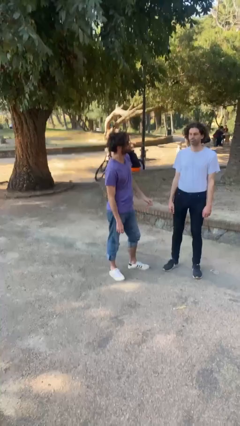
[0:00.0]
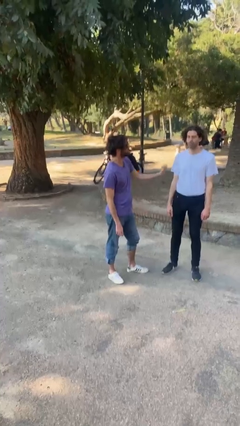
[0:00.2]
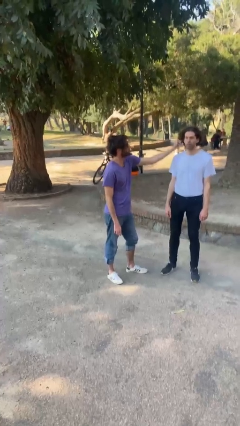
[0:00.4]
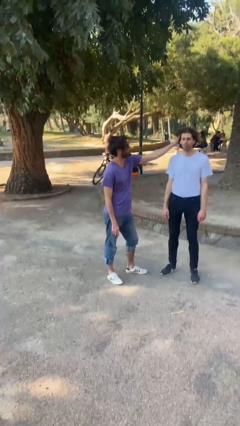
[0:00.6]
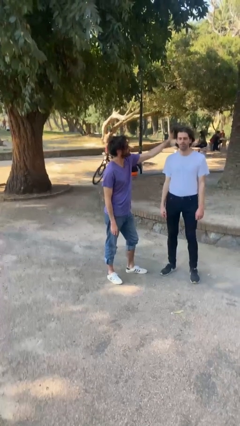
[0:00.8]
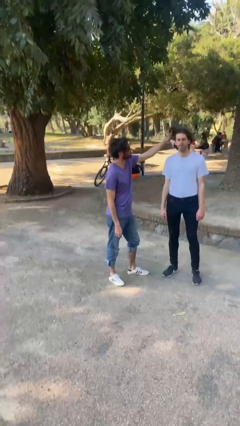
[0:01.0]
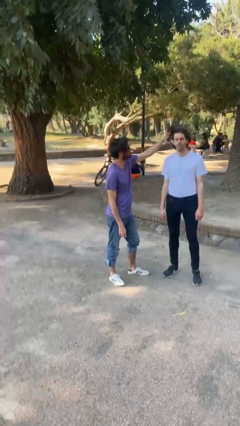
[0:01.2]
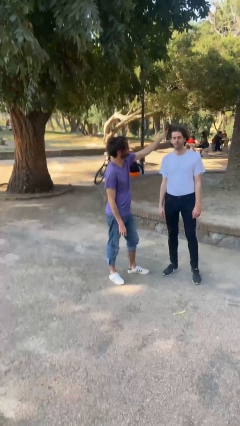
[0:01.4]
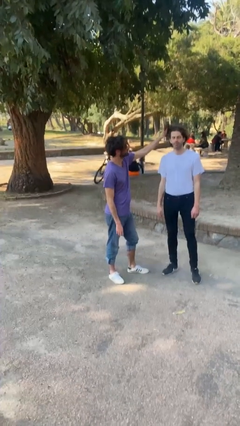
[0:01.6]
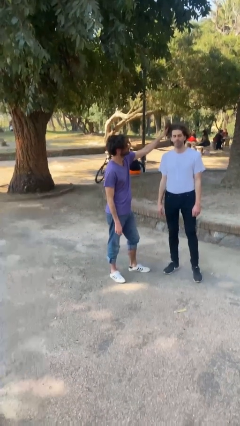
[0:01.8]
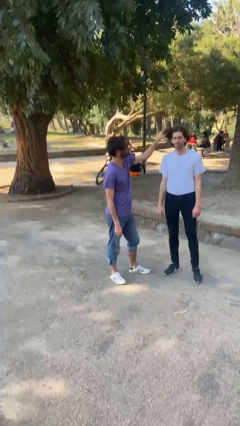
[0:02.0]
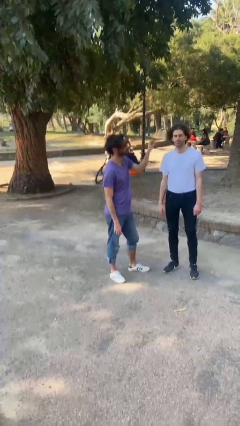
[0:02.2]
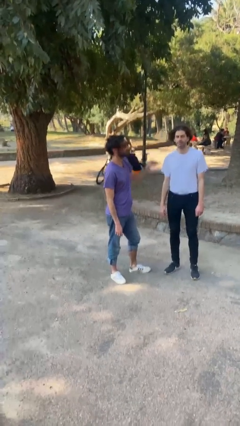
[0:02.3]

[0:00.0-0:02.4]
person grabs person by hair

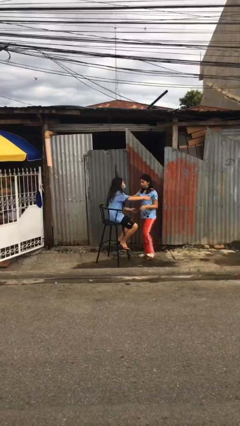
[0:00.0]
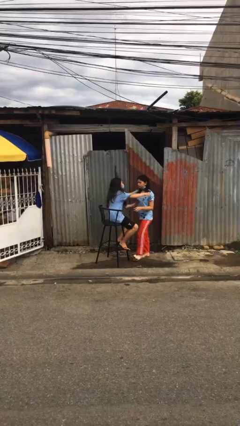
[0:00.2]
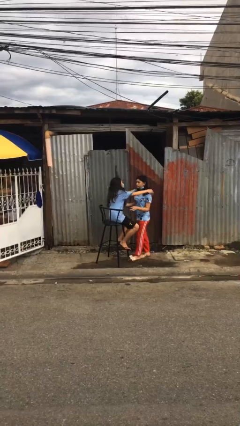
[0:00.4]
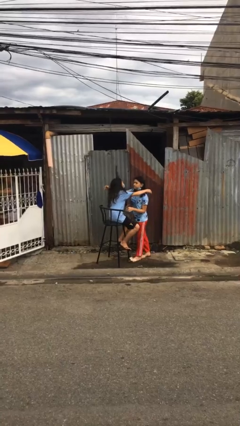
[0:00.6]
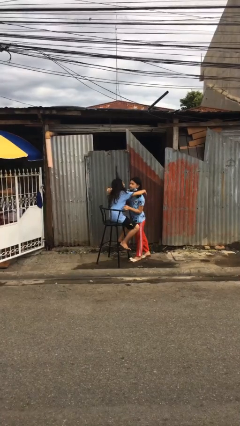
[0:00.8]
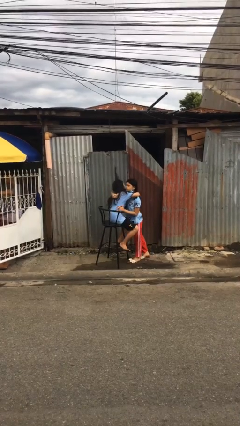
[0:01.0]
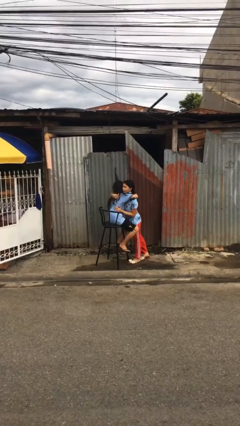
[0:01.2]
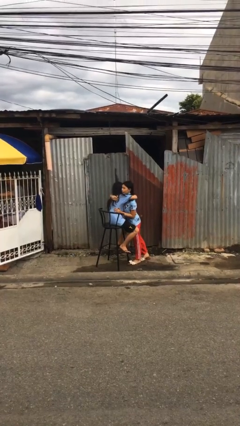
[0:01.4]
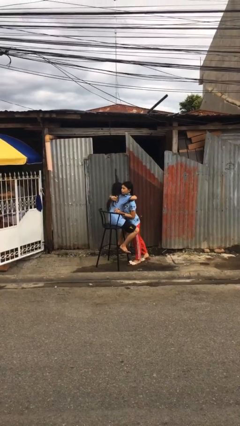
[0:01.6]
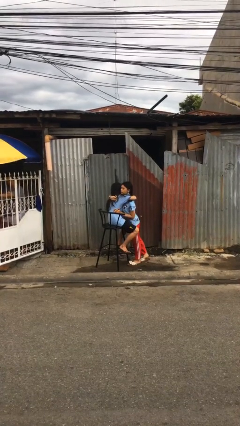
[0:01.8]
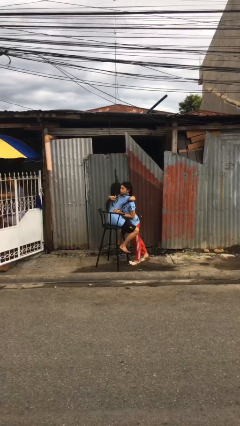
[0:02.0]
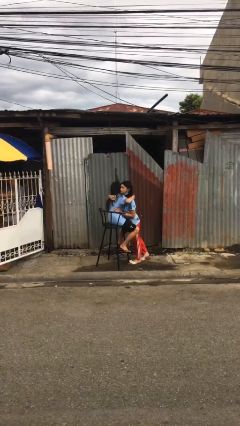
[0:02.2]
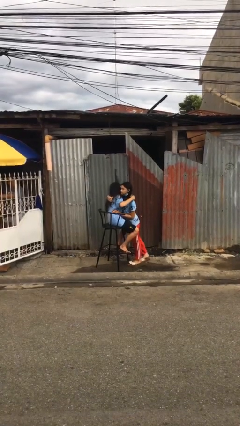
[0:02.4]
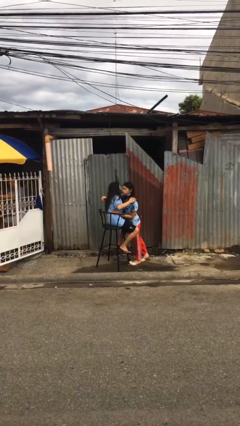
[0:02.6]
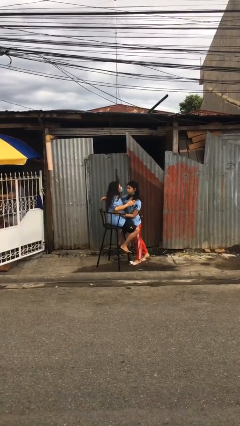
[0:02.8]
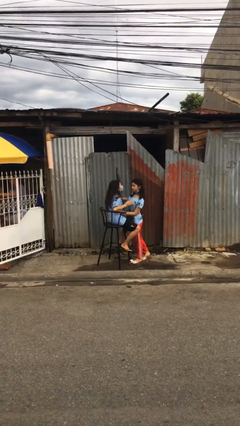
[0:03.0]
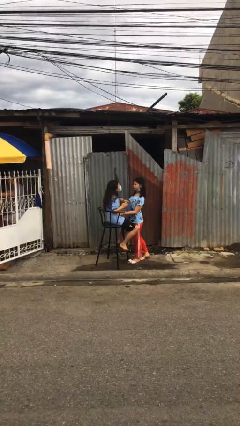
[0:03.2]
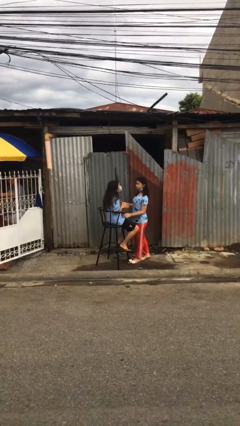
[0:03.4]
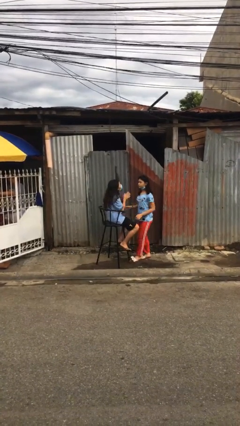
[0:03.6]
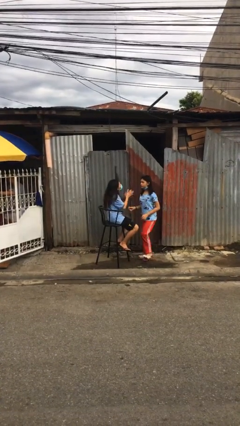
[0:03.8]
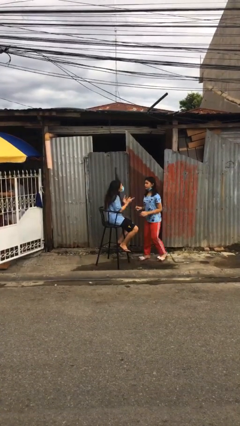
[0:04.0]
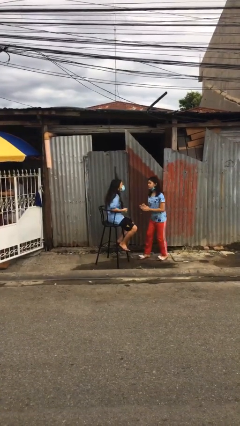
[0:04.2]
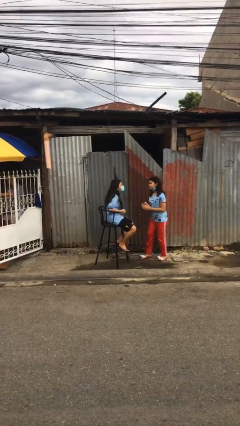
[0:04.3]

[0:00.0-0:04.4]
person embraces person

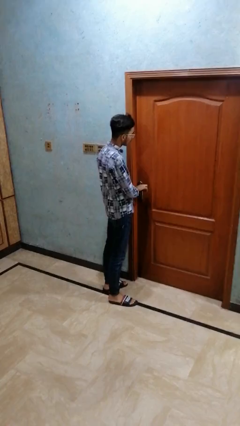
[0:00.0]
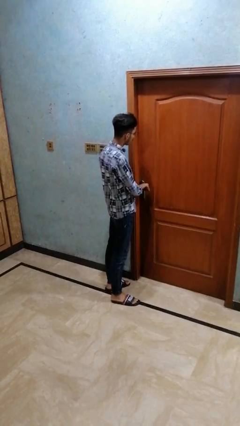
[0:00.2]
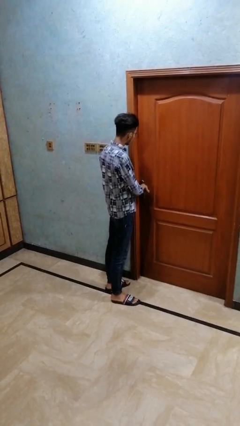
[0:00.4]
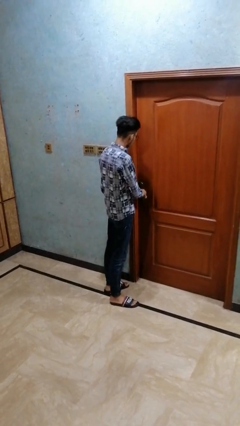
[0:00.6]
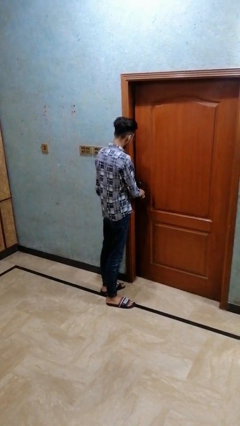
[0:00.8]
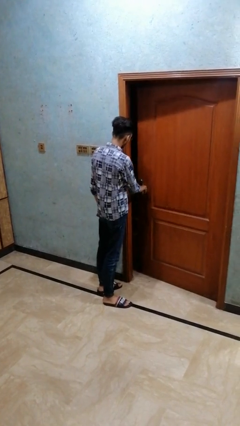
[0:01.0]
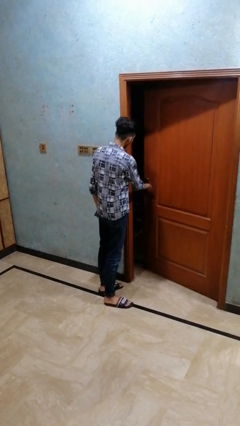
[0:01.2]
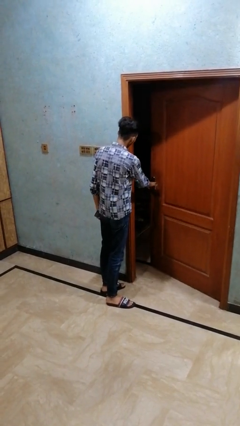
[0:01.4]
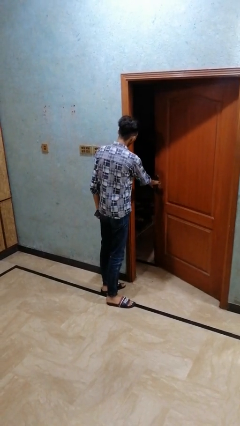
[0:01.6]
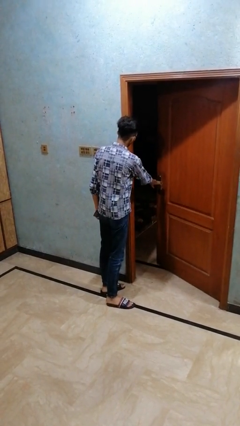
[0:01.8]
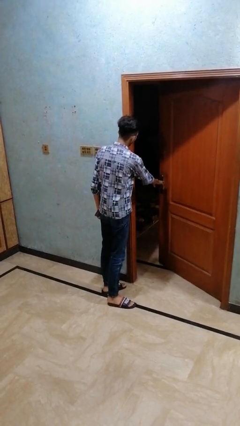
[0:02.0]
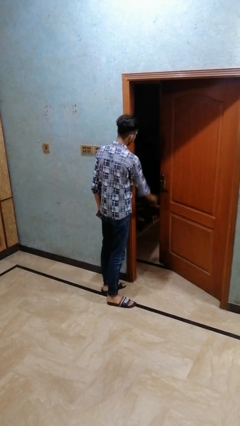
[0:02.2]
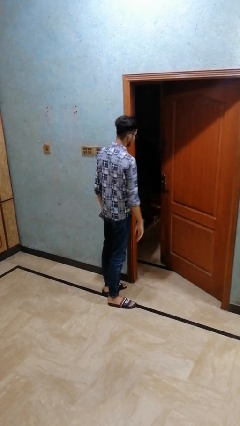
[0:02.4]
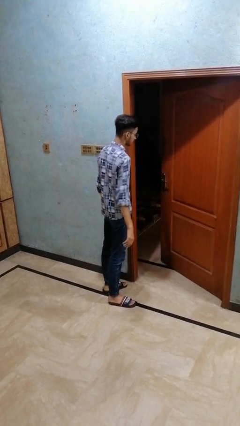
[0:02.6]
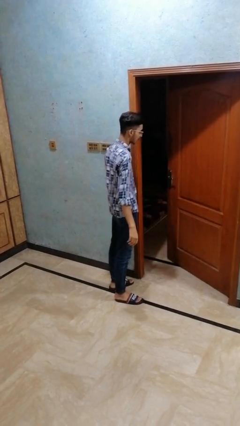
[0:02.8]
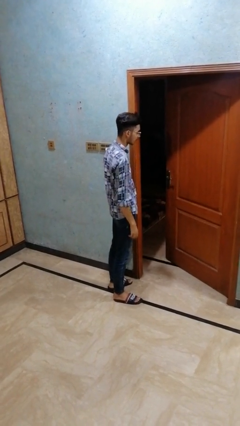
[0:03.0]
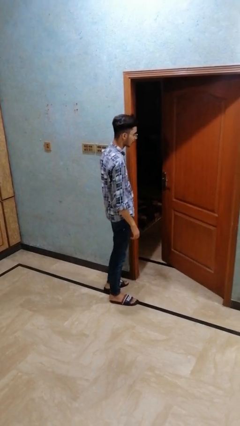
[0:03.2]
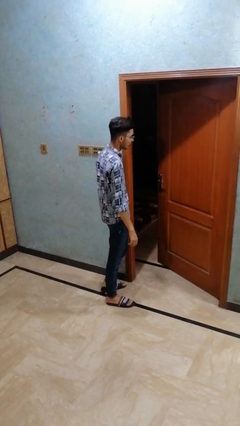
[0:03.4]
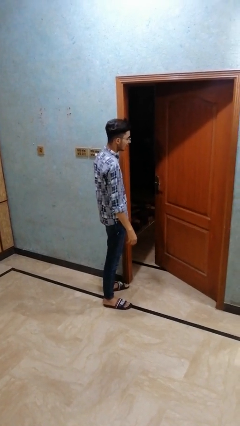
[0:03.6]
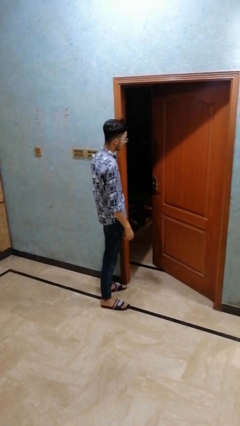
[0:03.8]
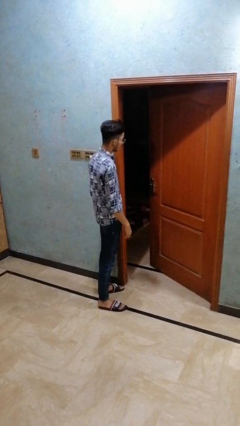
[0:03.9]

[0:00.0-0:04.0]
person opens closet door

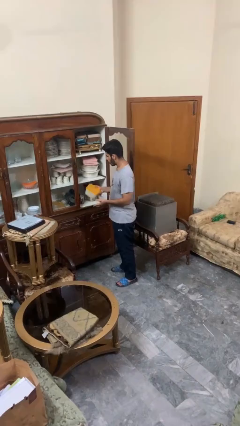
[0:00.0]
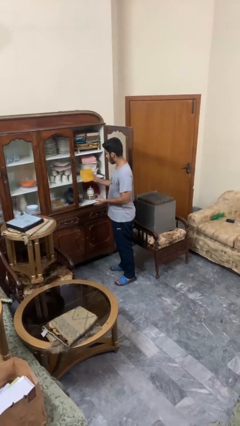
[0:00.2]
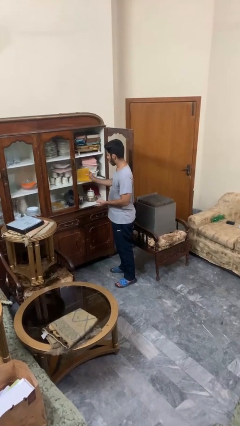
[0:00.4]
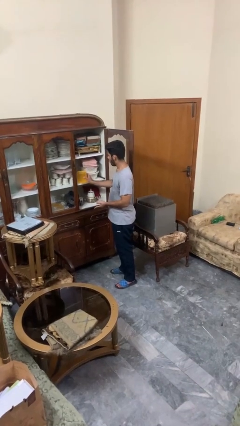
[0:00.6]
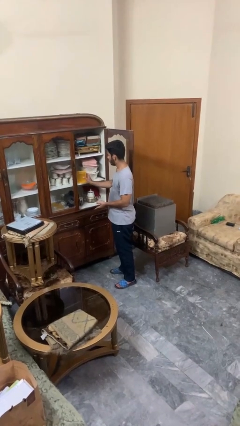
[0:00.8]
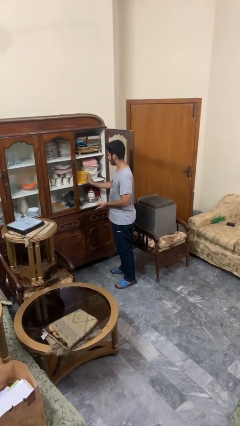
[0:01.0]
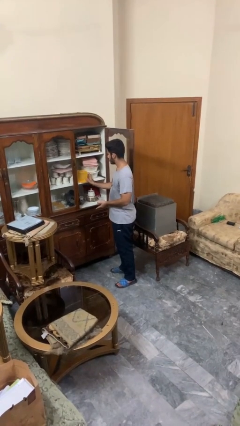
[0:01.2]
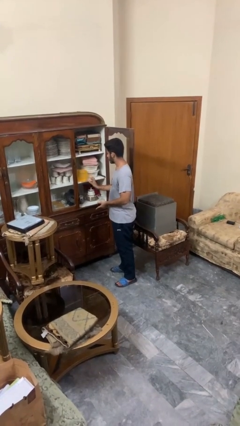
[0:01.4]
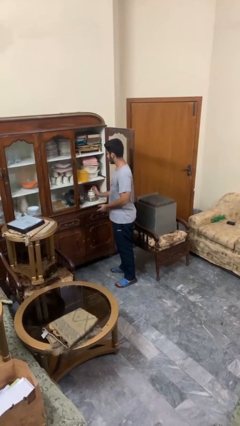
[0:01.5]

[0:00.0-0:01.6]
person puts down object into cabinet

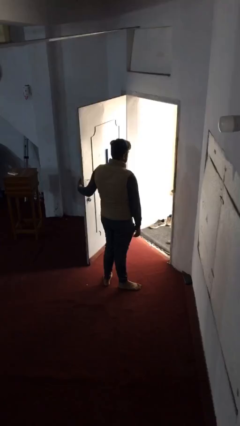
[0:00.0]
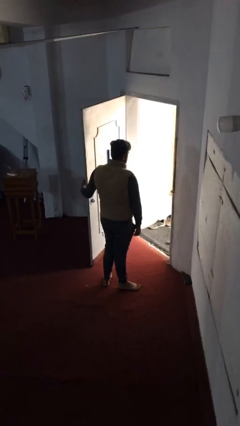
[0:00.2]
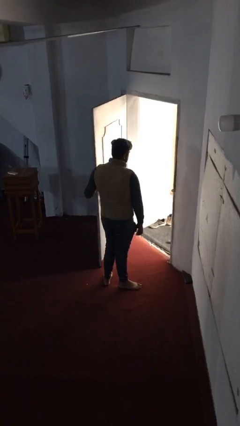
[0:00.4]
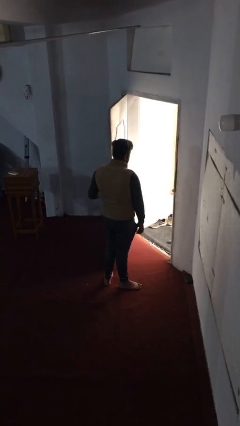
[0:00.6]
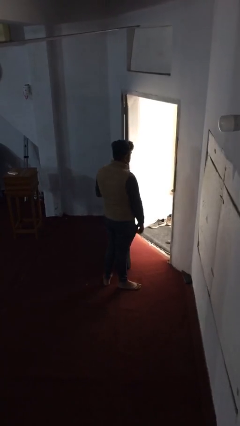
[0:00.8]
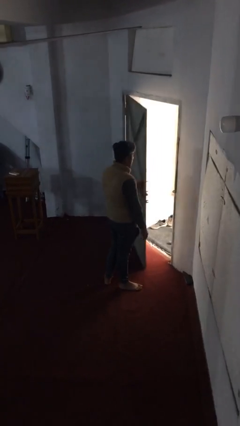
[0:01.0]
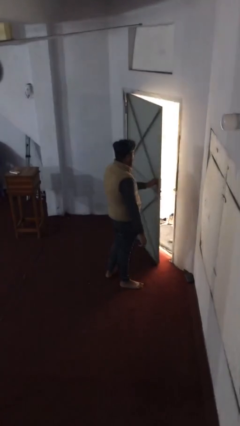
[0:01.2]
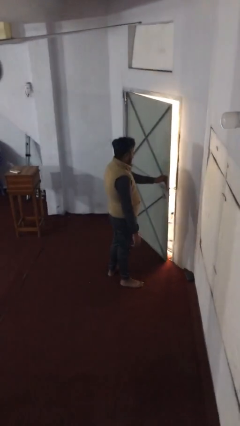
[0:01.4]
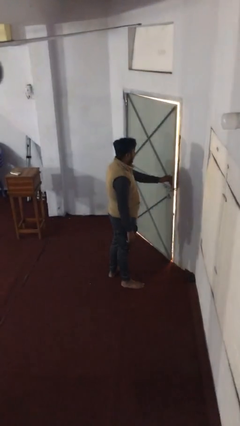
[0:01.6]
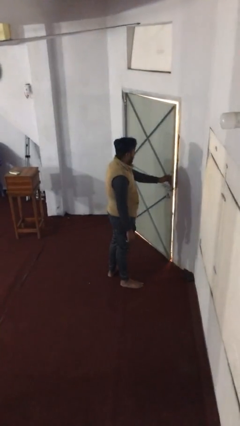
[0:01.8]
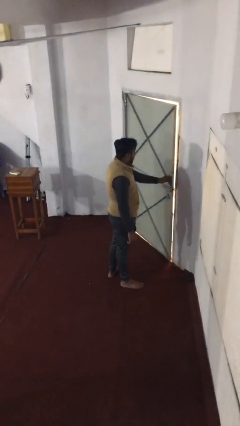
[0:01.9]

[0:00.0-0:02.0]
person closes facility door

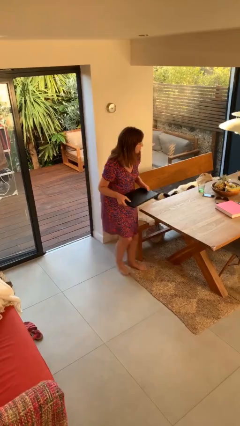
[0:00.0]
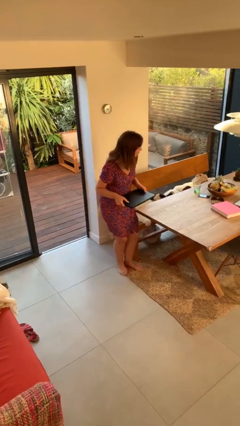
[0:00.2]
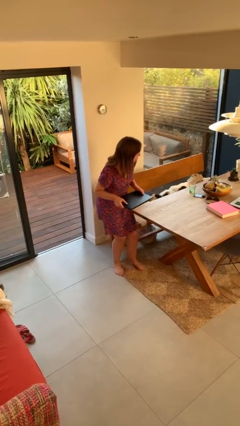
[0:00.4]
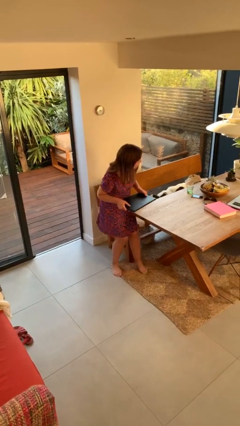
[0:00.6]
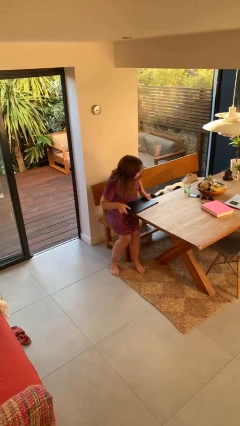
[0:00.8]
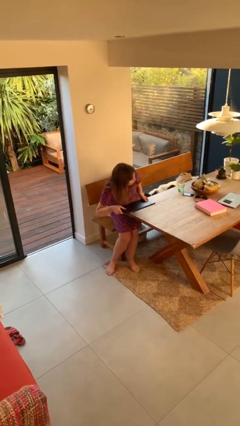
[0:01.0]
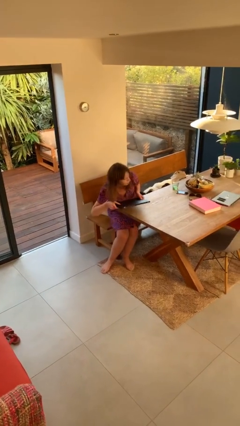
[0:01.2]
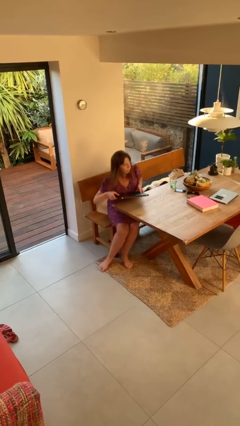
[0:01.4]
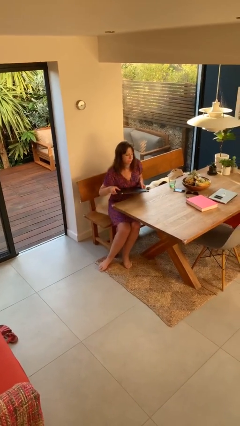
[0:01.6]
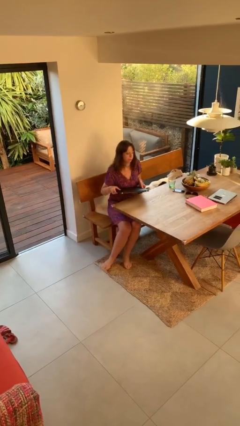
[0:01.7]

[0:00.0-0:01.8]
person sits down

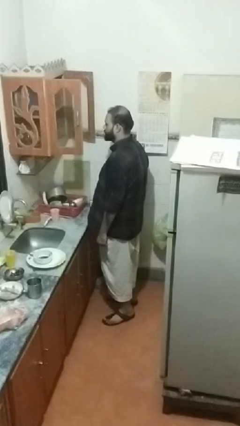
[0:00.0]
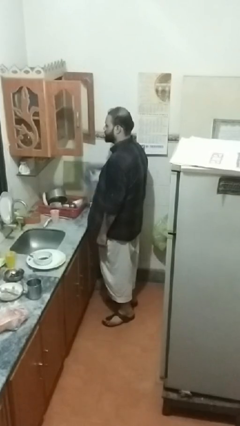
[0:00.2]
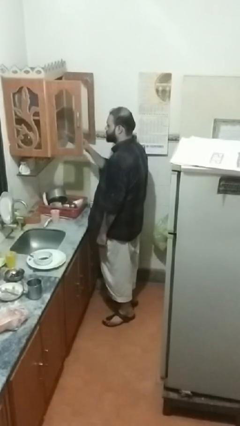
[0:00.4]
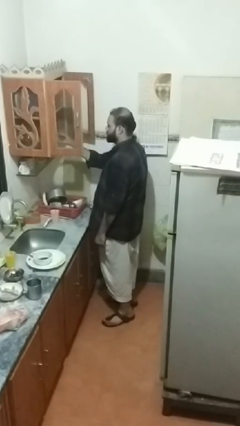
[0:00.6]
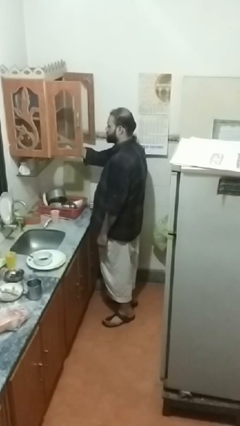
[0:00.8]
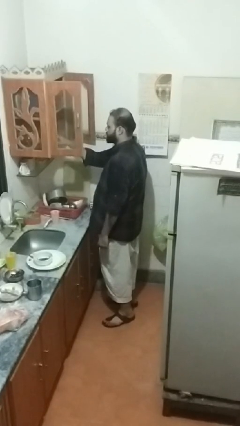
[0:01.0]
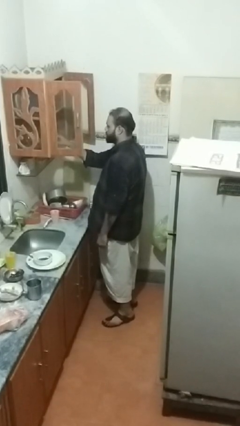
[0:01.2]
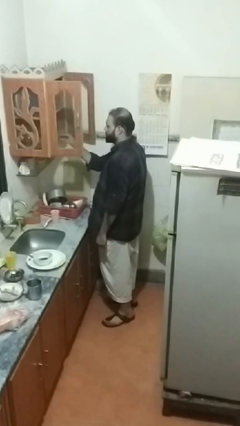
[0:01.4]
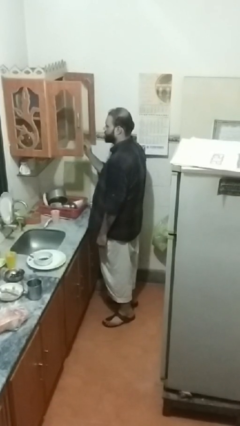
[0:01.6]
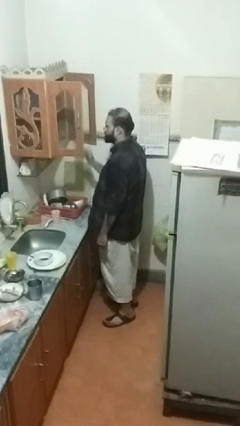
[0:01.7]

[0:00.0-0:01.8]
person puts object in cabinet
